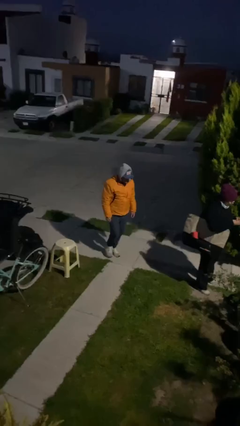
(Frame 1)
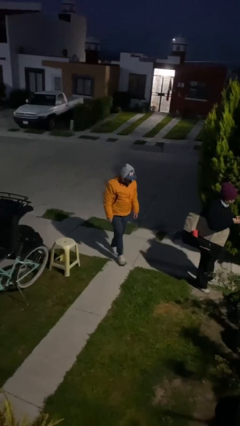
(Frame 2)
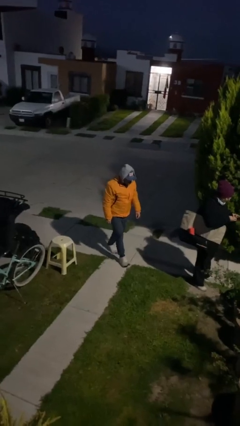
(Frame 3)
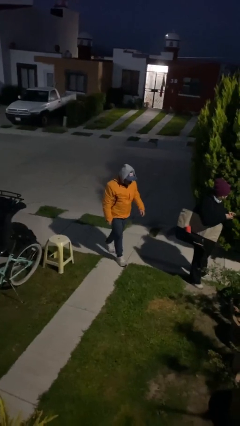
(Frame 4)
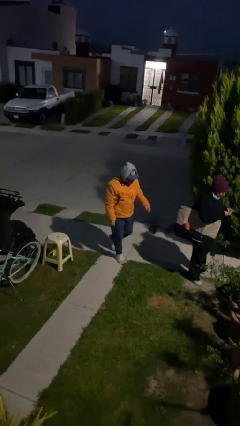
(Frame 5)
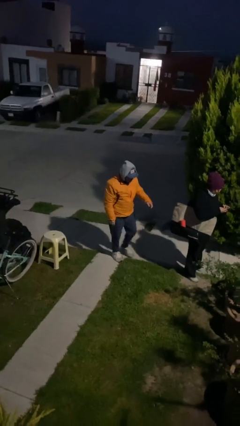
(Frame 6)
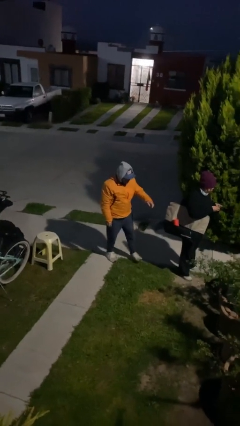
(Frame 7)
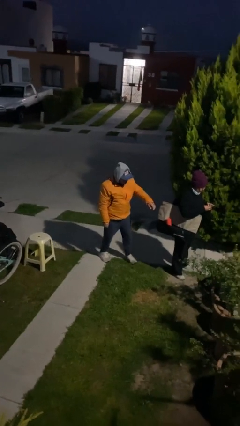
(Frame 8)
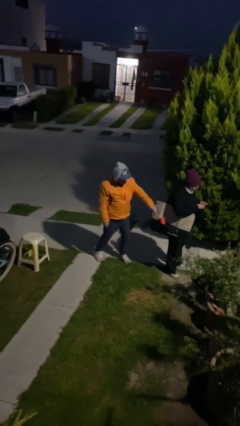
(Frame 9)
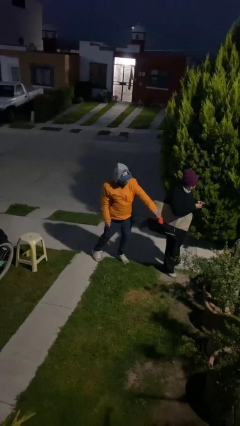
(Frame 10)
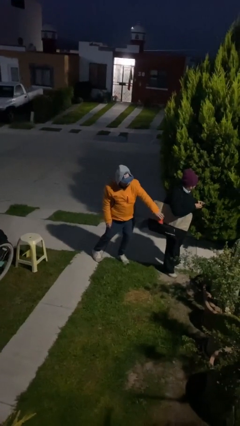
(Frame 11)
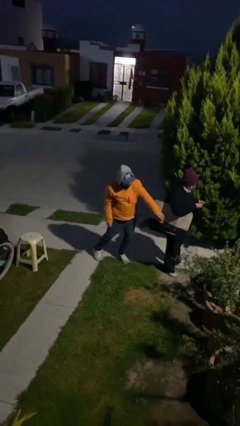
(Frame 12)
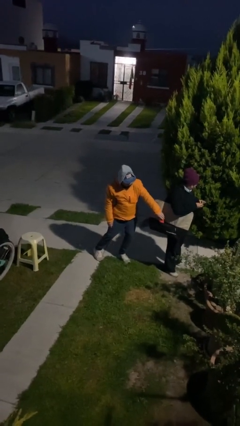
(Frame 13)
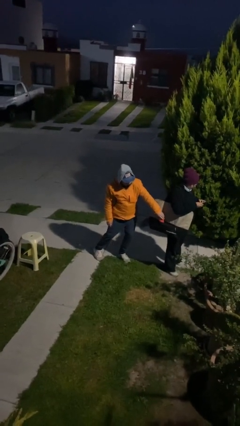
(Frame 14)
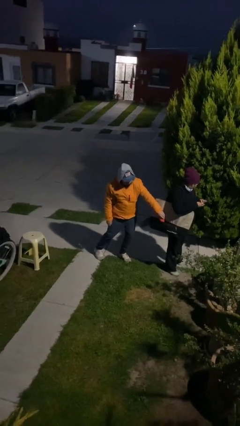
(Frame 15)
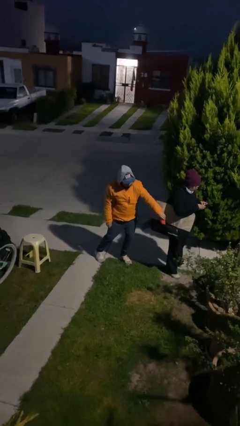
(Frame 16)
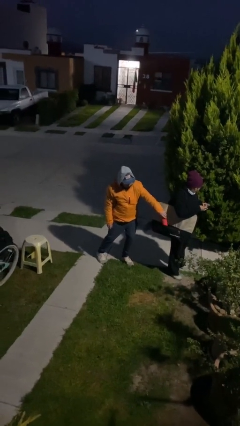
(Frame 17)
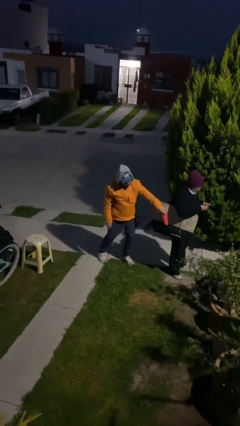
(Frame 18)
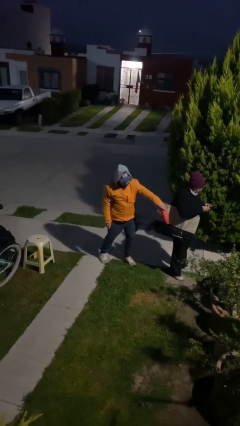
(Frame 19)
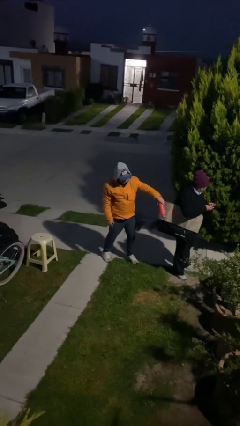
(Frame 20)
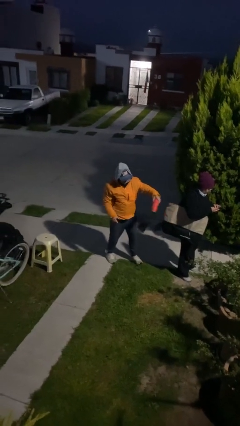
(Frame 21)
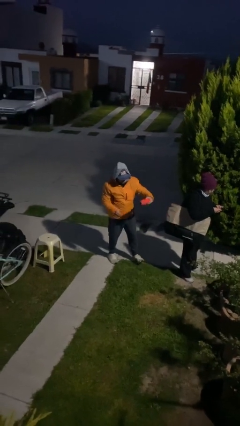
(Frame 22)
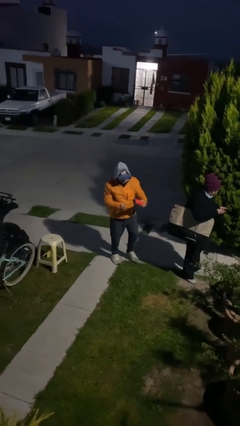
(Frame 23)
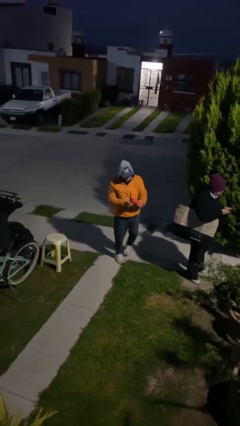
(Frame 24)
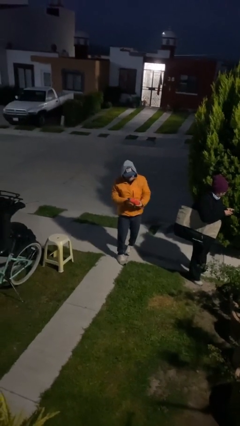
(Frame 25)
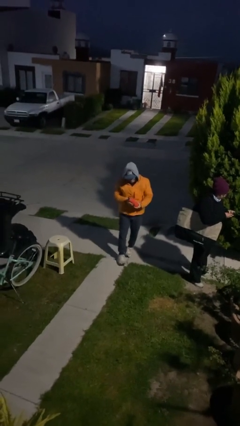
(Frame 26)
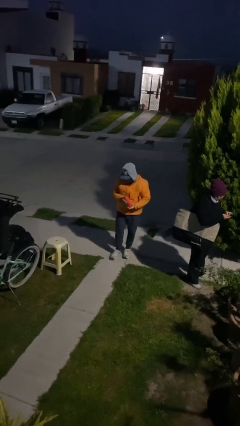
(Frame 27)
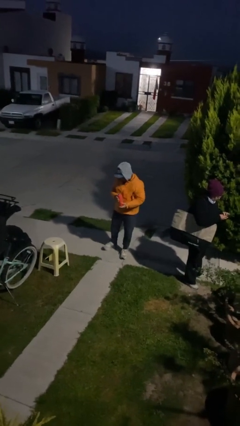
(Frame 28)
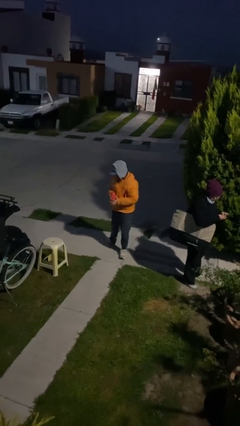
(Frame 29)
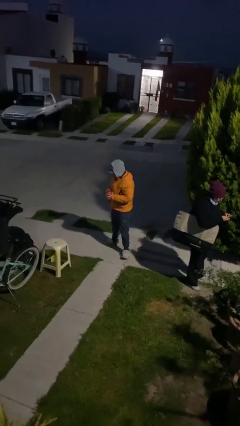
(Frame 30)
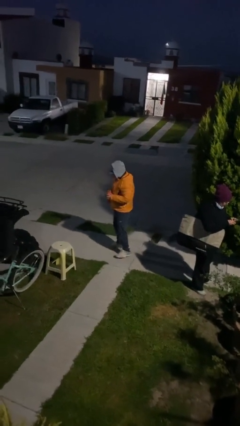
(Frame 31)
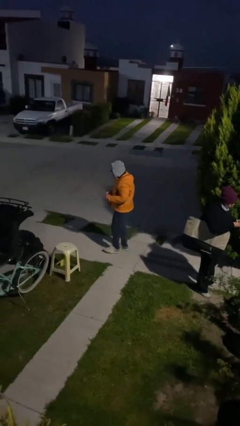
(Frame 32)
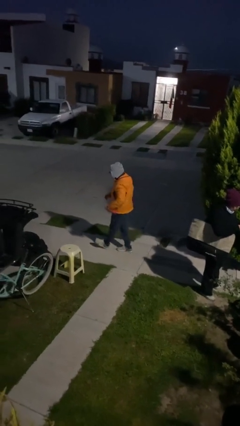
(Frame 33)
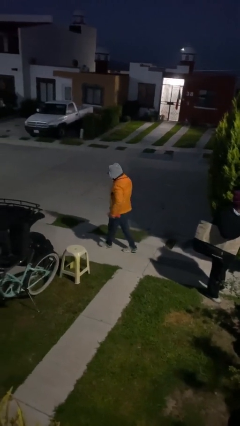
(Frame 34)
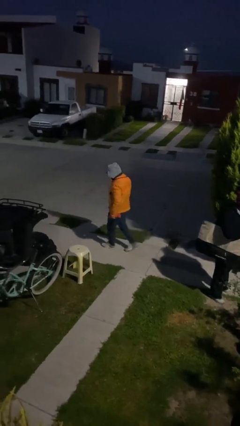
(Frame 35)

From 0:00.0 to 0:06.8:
person steals object from person

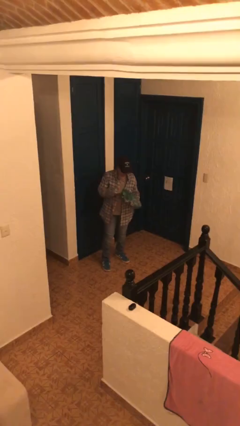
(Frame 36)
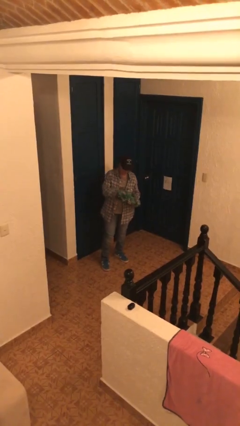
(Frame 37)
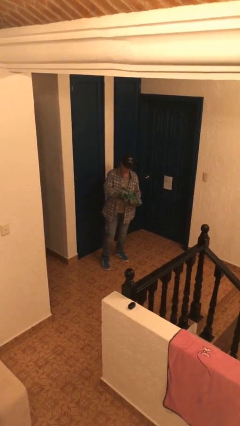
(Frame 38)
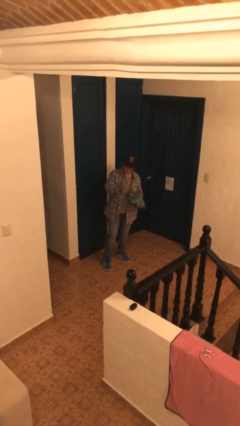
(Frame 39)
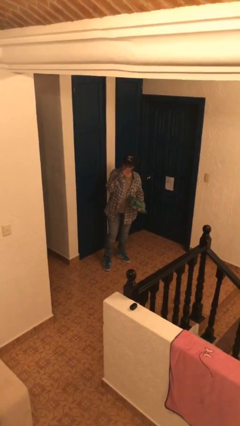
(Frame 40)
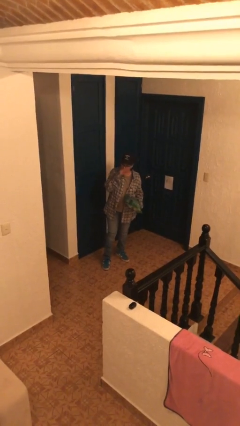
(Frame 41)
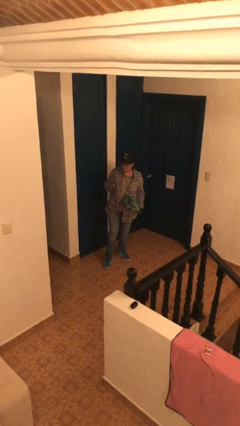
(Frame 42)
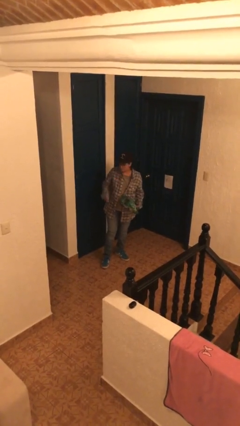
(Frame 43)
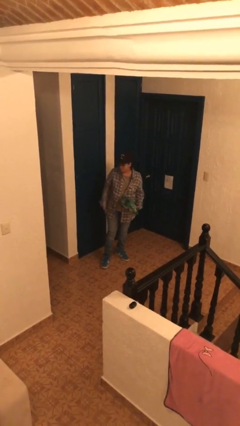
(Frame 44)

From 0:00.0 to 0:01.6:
person eats snack from bag

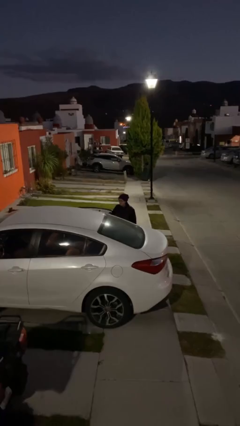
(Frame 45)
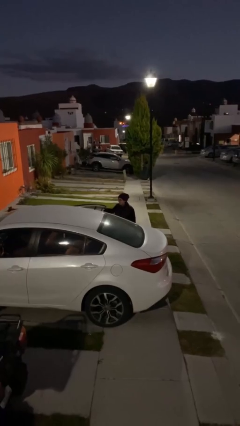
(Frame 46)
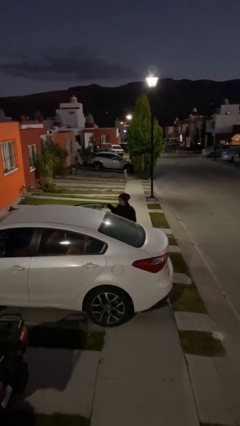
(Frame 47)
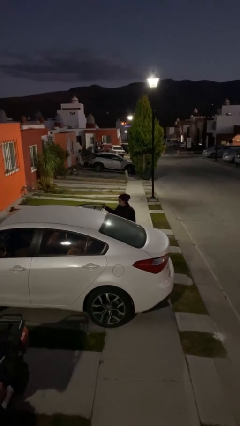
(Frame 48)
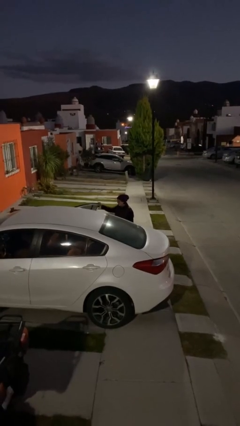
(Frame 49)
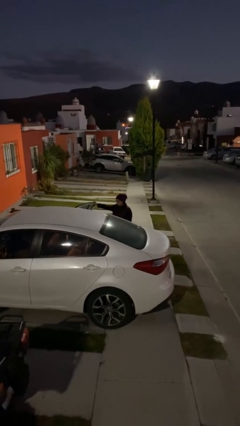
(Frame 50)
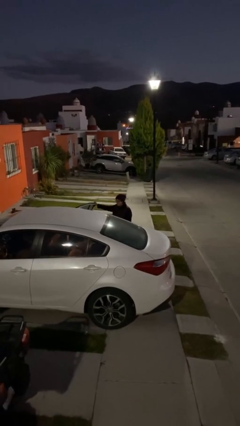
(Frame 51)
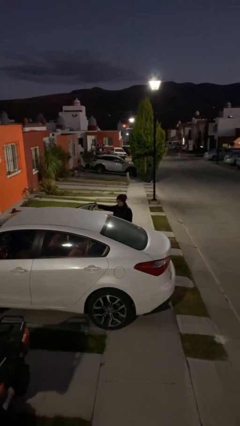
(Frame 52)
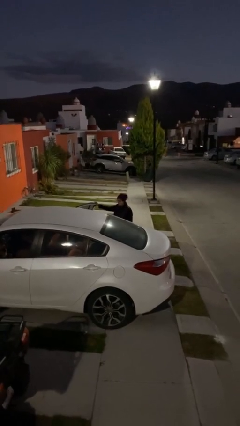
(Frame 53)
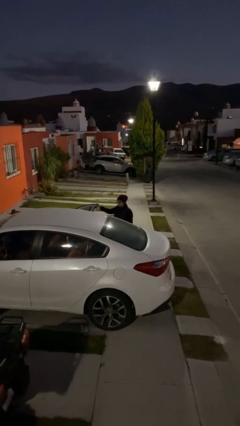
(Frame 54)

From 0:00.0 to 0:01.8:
person opens car door

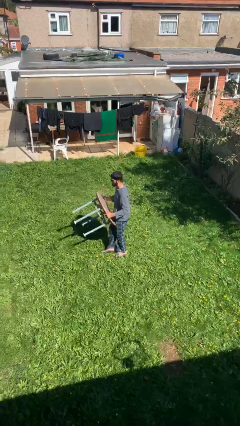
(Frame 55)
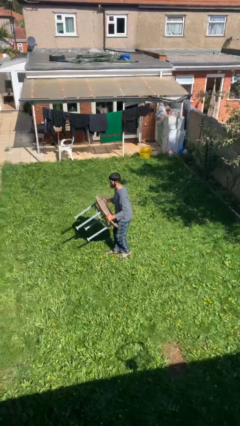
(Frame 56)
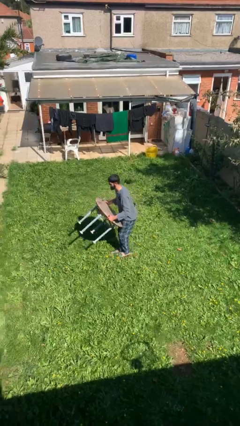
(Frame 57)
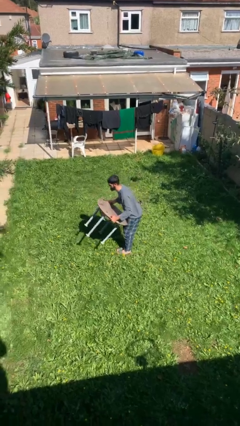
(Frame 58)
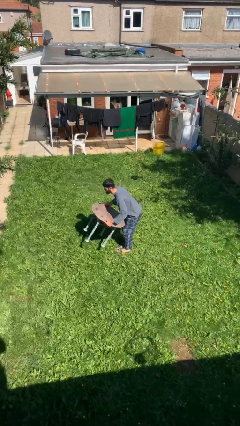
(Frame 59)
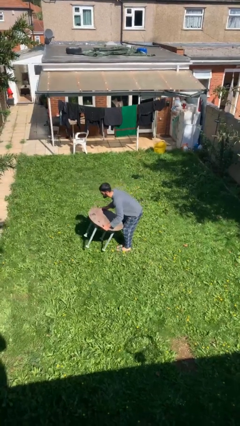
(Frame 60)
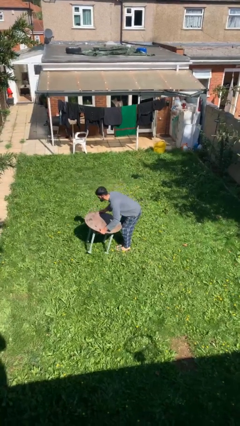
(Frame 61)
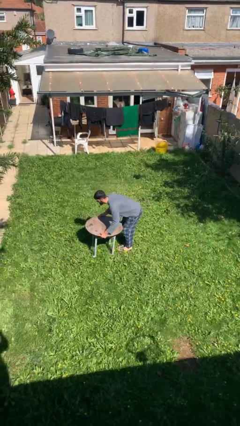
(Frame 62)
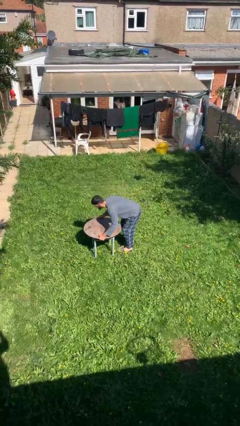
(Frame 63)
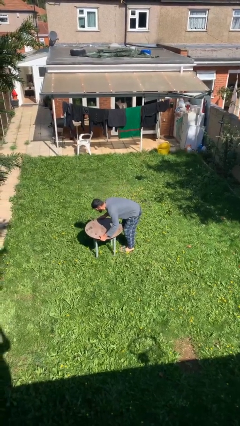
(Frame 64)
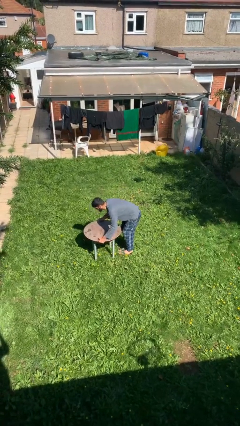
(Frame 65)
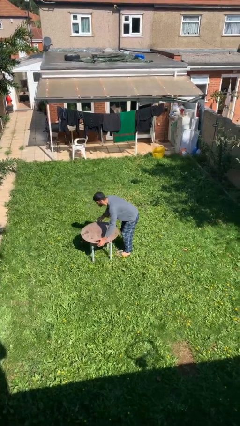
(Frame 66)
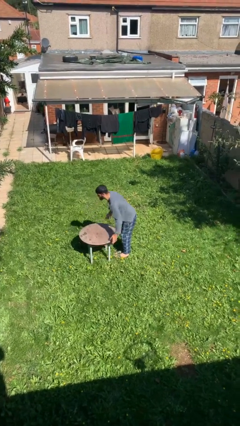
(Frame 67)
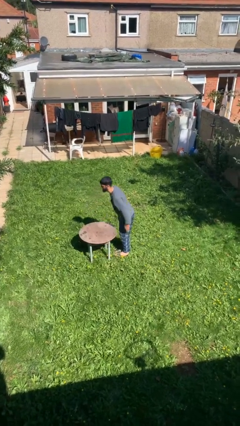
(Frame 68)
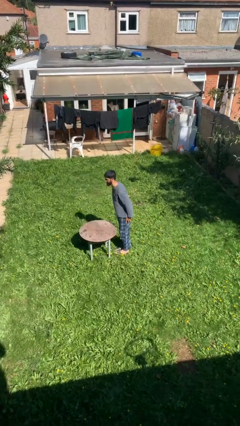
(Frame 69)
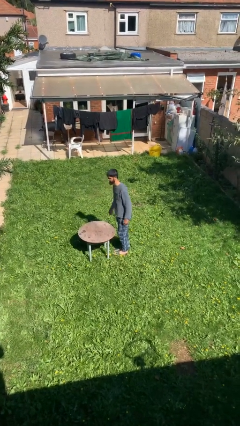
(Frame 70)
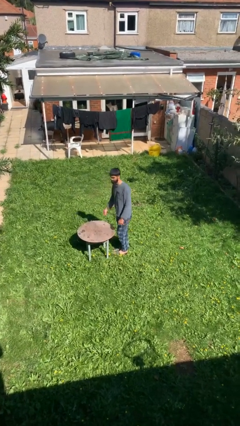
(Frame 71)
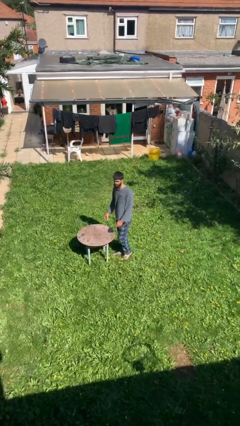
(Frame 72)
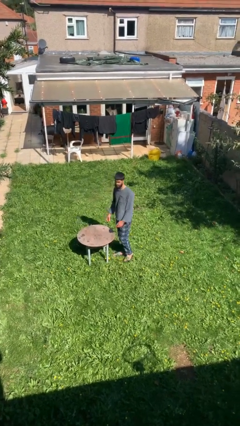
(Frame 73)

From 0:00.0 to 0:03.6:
person puts down object on floor

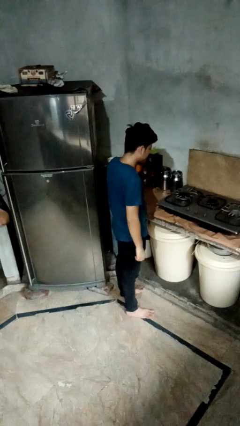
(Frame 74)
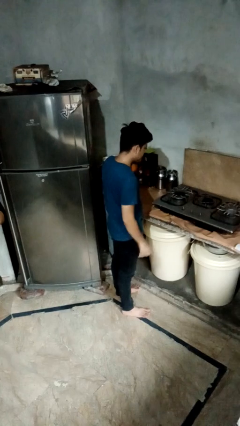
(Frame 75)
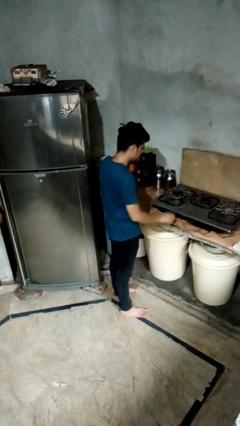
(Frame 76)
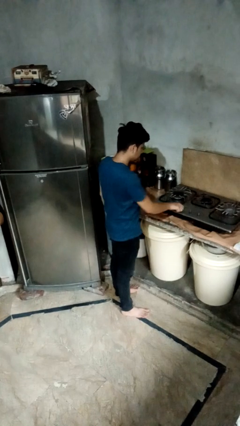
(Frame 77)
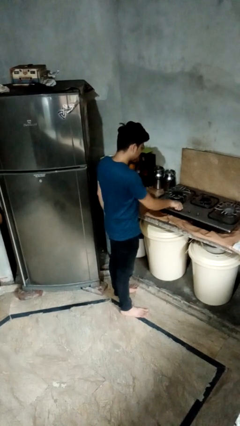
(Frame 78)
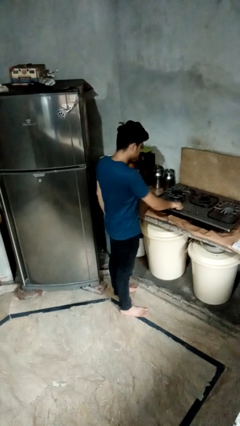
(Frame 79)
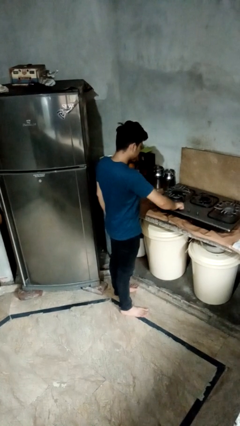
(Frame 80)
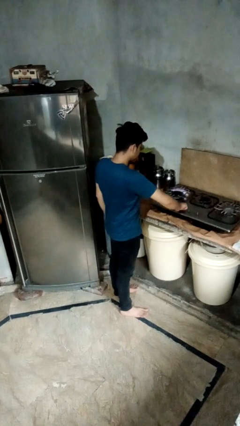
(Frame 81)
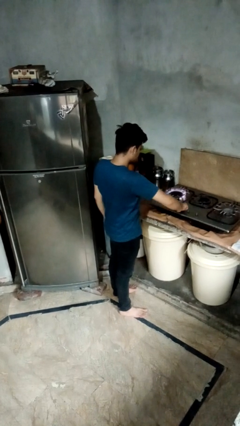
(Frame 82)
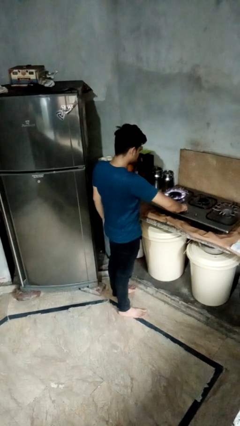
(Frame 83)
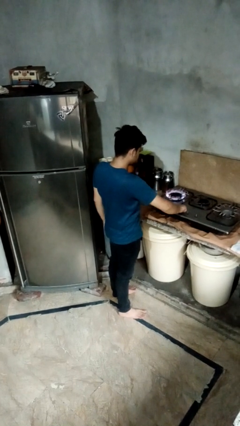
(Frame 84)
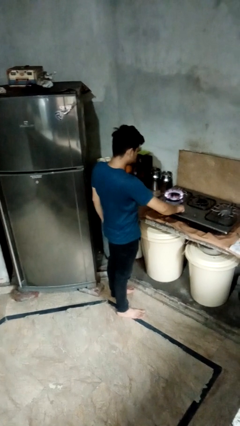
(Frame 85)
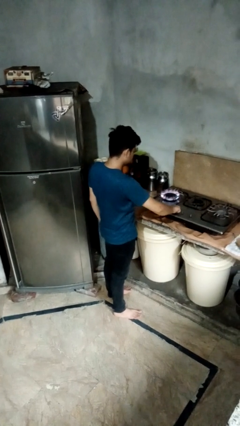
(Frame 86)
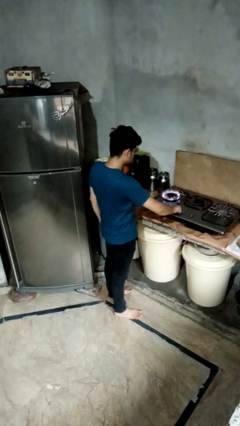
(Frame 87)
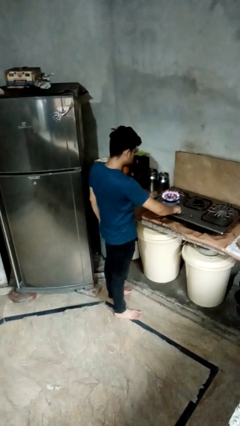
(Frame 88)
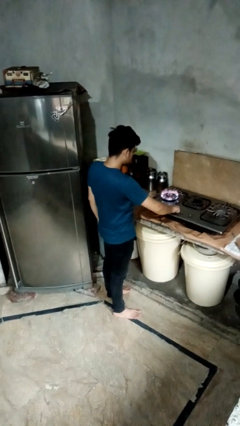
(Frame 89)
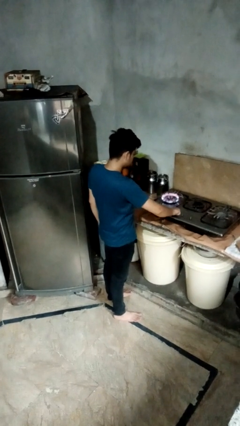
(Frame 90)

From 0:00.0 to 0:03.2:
person turns on stovetop

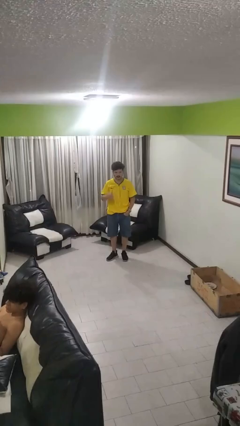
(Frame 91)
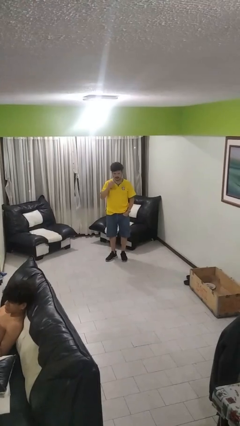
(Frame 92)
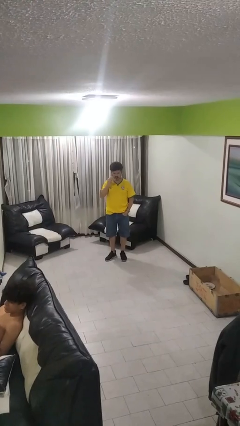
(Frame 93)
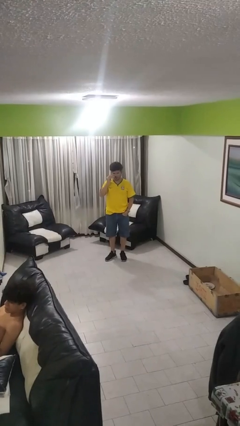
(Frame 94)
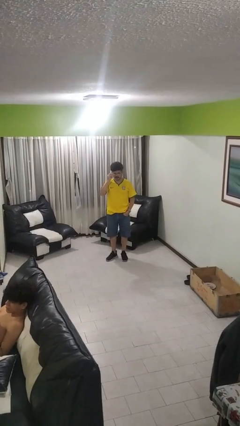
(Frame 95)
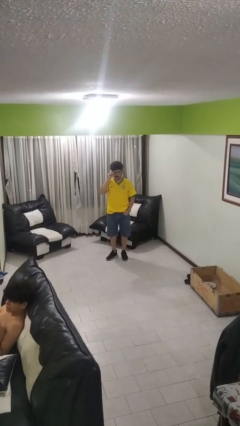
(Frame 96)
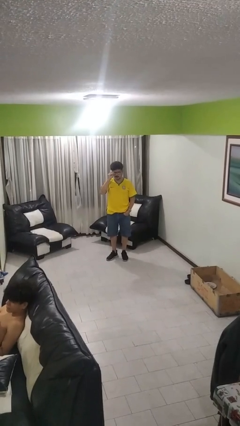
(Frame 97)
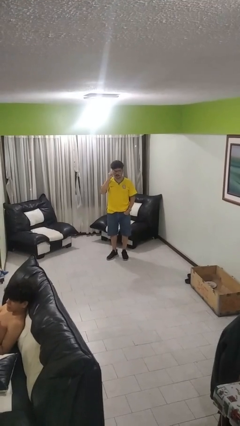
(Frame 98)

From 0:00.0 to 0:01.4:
person puts on glasses
